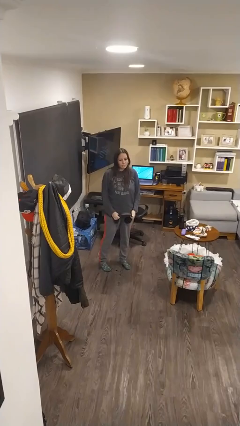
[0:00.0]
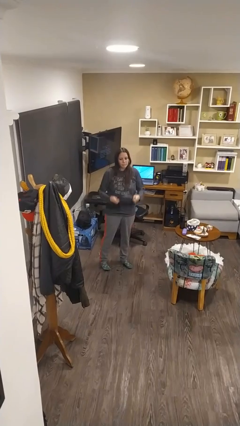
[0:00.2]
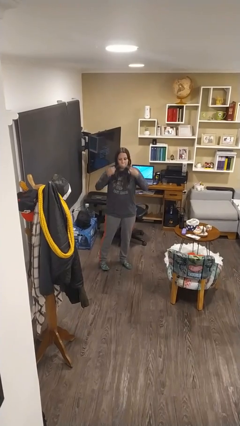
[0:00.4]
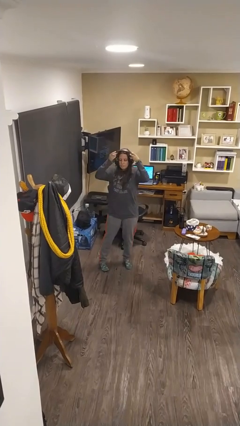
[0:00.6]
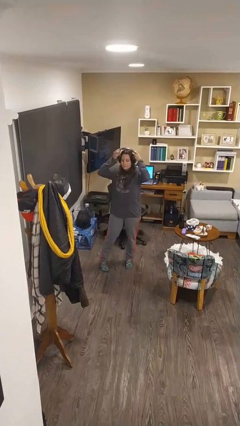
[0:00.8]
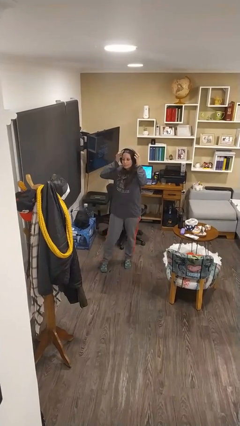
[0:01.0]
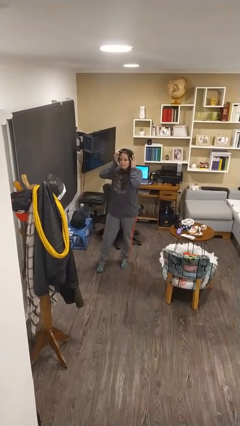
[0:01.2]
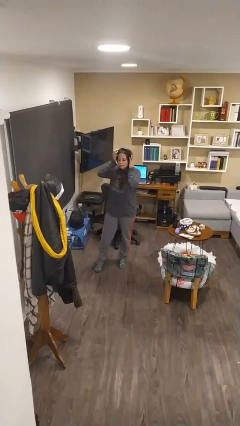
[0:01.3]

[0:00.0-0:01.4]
person puts on headphones

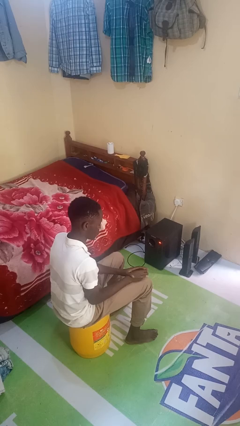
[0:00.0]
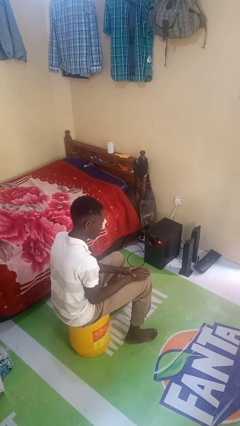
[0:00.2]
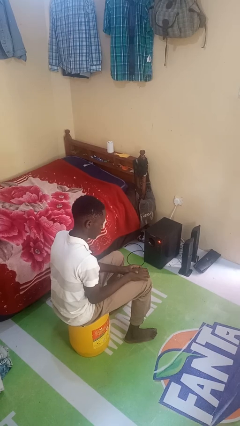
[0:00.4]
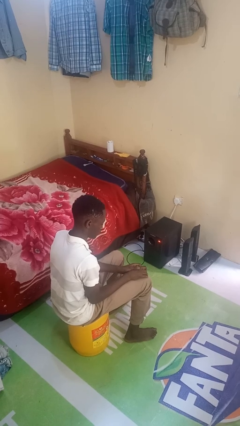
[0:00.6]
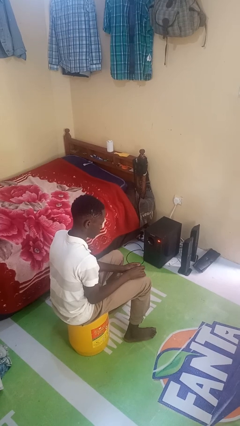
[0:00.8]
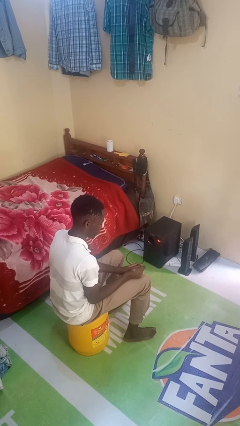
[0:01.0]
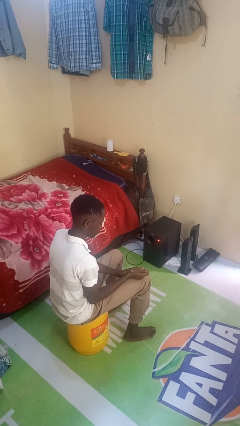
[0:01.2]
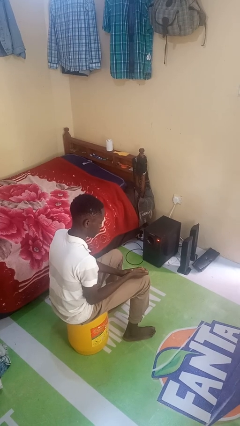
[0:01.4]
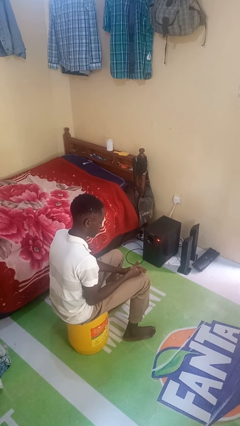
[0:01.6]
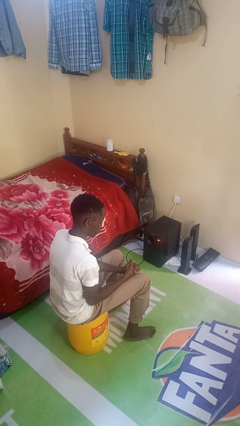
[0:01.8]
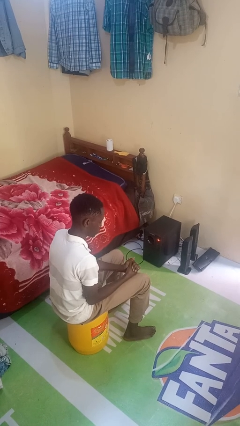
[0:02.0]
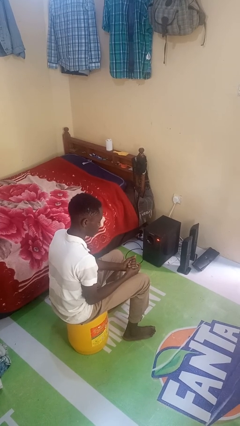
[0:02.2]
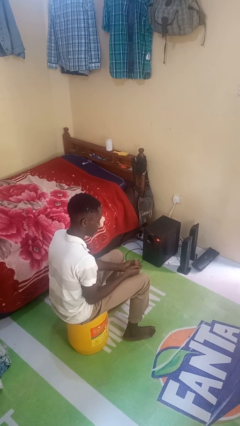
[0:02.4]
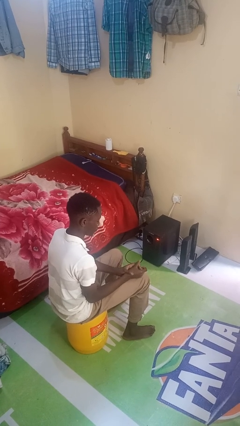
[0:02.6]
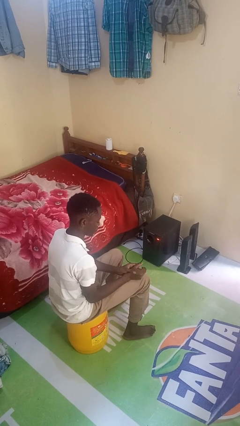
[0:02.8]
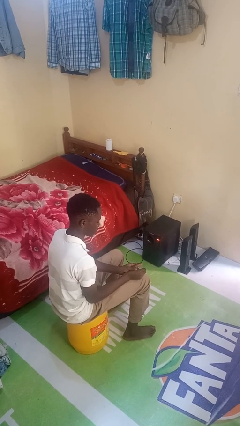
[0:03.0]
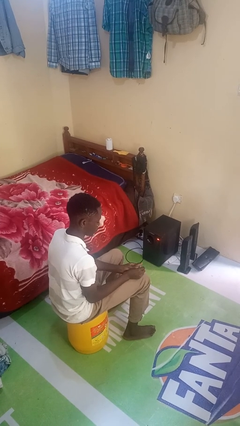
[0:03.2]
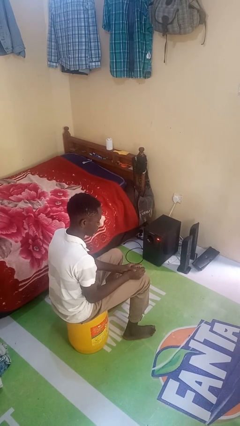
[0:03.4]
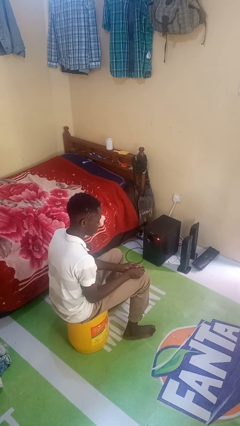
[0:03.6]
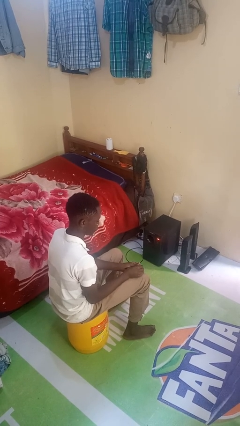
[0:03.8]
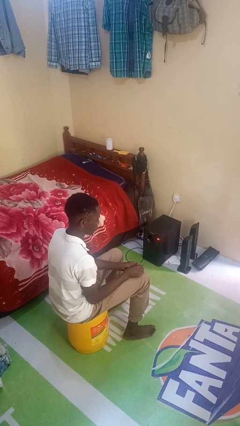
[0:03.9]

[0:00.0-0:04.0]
person looks at hands in lap

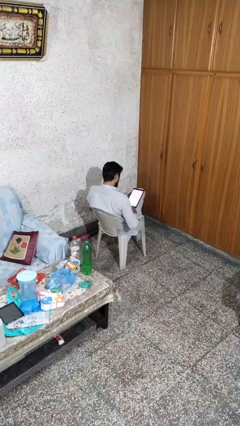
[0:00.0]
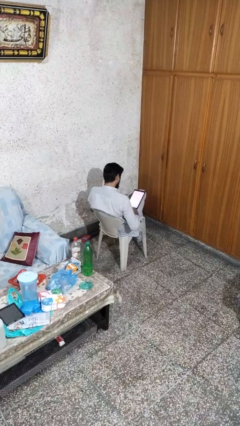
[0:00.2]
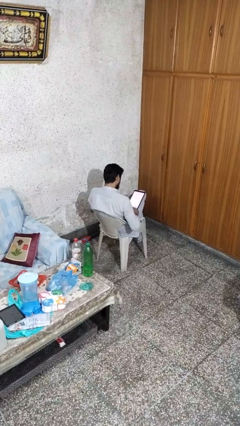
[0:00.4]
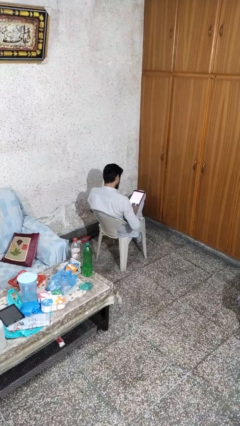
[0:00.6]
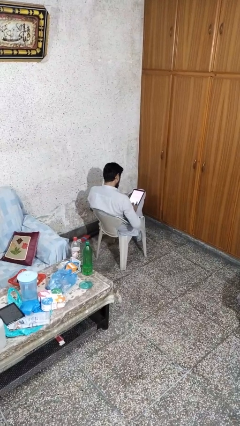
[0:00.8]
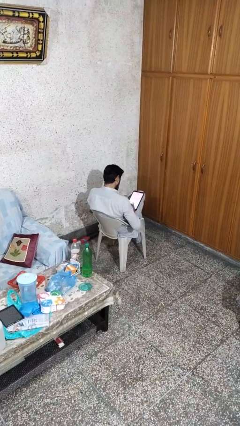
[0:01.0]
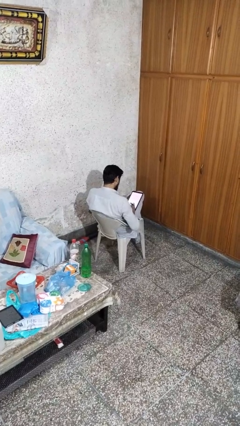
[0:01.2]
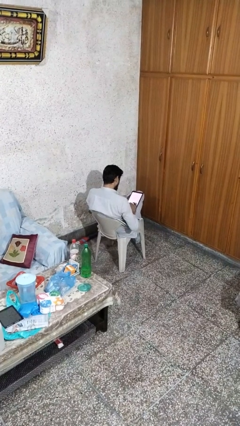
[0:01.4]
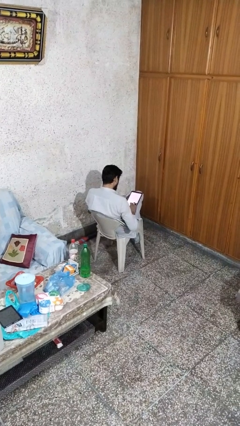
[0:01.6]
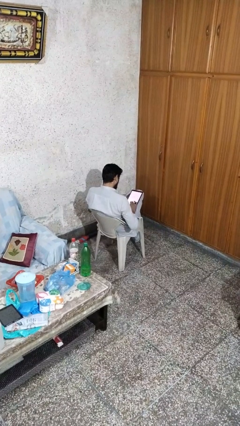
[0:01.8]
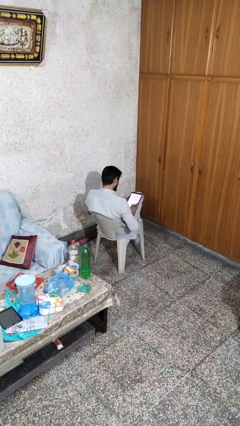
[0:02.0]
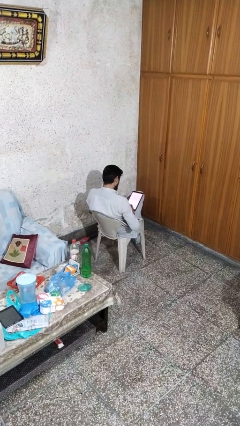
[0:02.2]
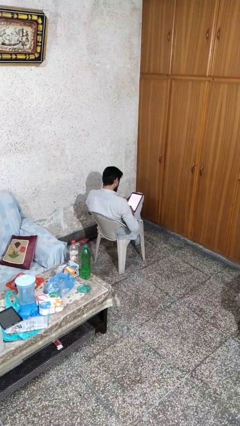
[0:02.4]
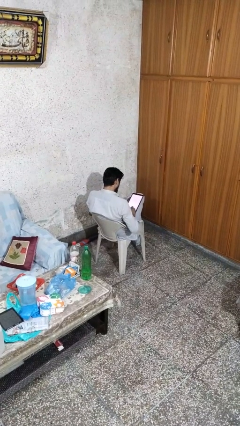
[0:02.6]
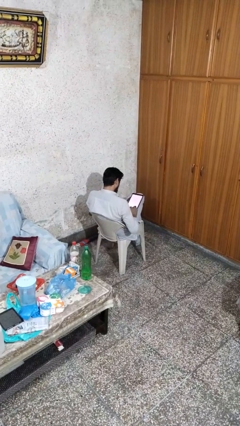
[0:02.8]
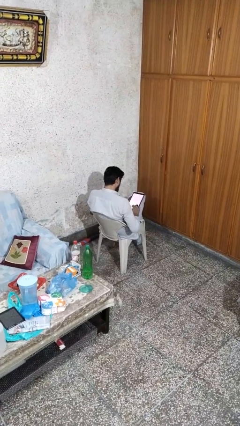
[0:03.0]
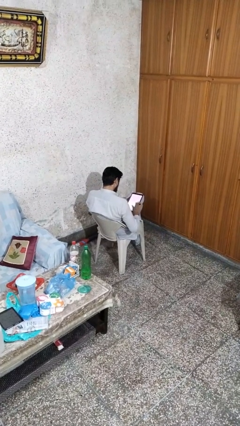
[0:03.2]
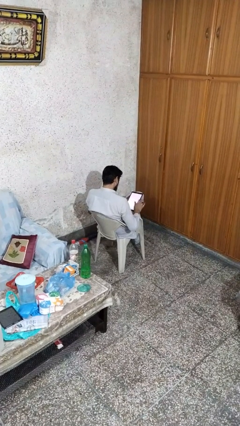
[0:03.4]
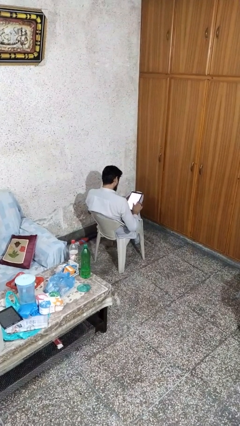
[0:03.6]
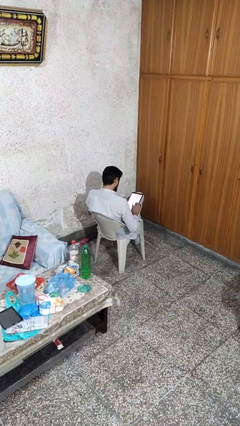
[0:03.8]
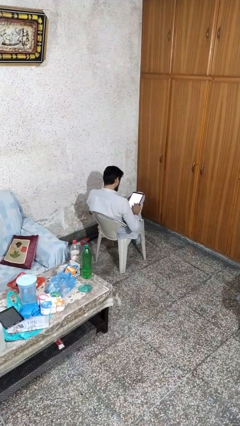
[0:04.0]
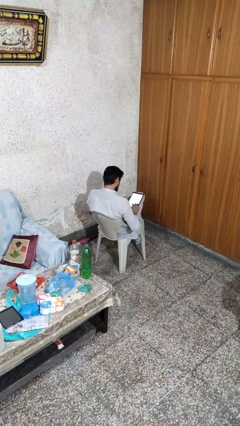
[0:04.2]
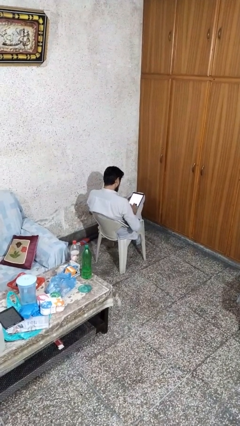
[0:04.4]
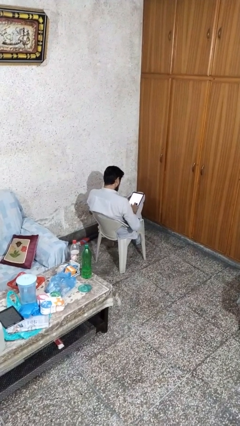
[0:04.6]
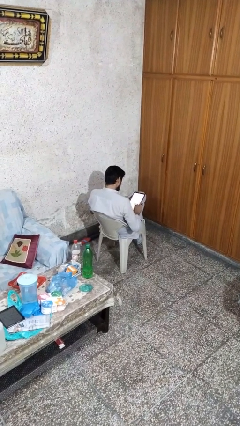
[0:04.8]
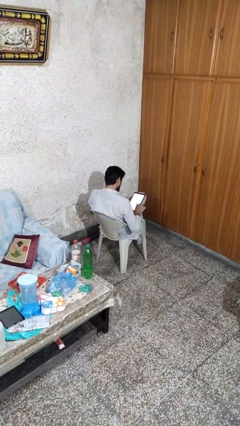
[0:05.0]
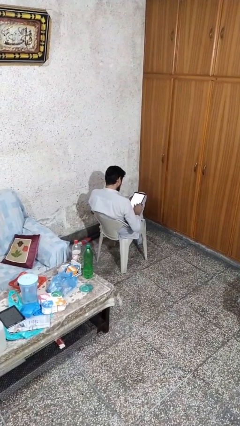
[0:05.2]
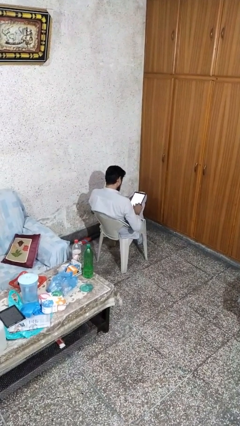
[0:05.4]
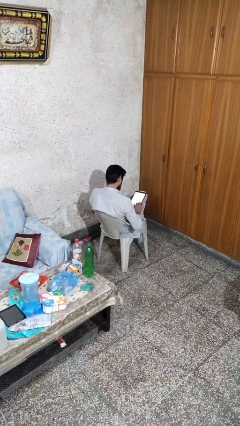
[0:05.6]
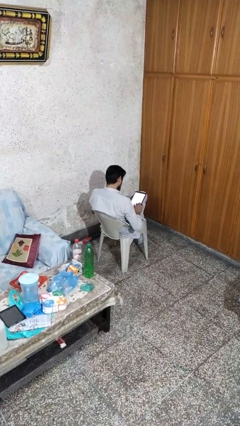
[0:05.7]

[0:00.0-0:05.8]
person interacts with tablet

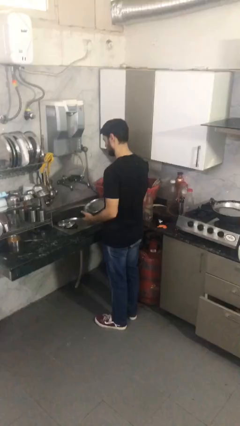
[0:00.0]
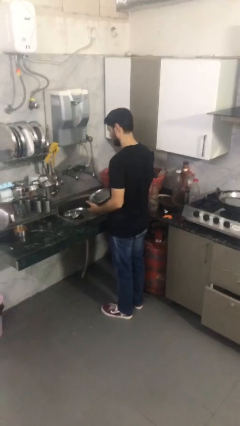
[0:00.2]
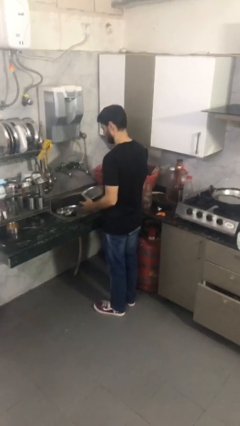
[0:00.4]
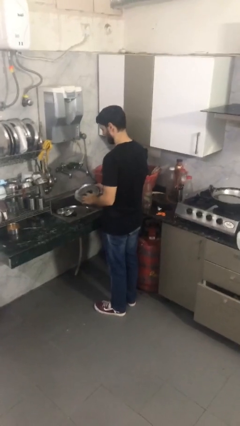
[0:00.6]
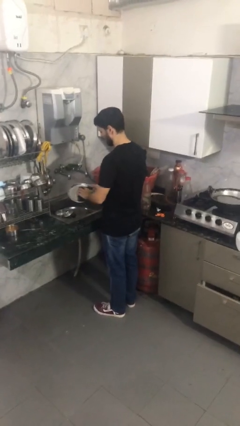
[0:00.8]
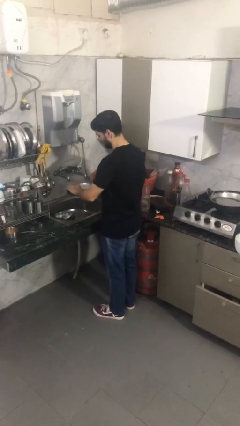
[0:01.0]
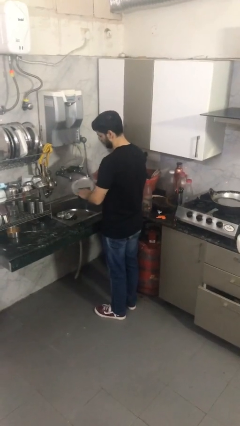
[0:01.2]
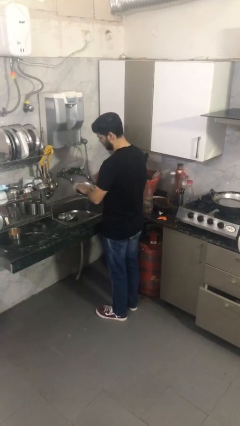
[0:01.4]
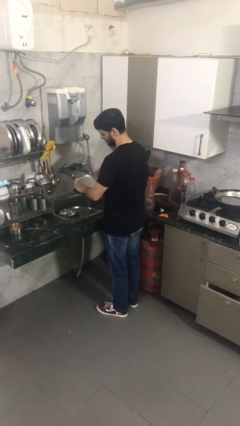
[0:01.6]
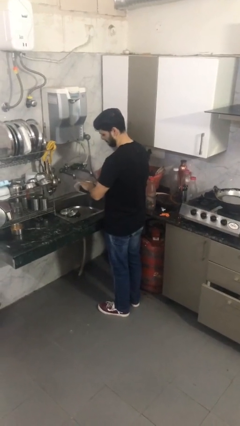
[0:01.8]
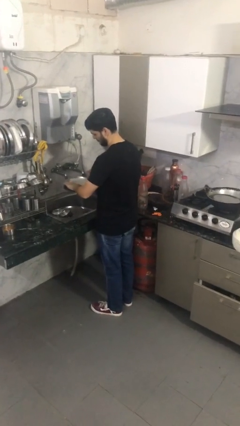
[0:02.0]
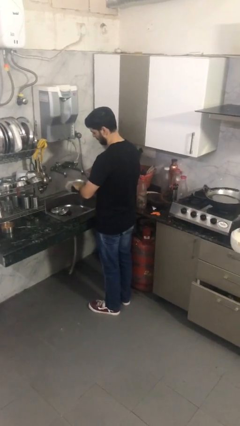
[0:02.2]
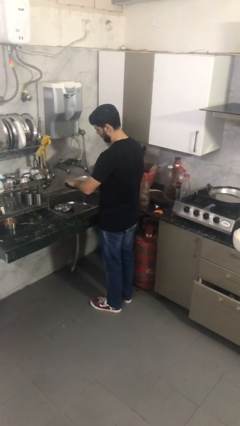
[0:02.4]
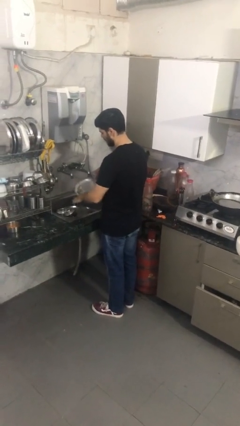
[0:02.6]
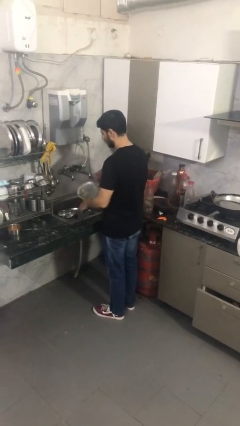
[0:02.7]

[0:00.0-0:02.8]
person washes dish

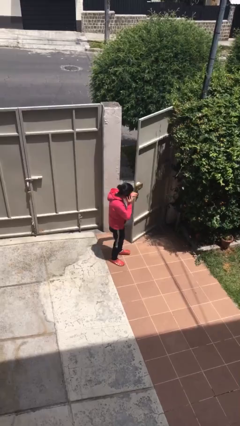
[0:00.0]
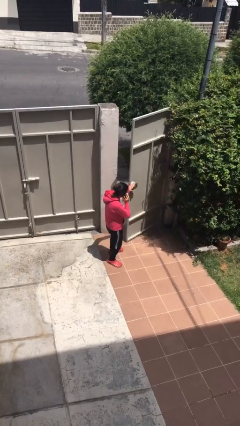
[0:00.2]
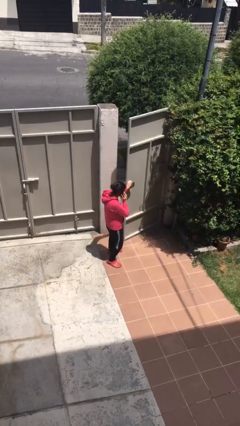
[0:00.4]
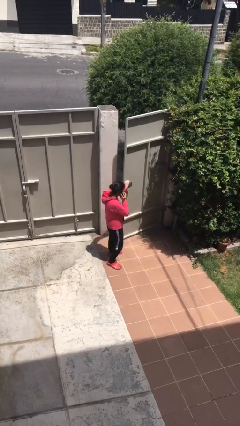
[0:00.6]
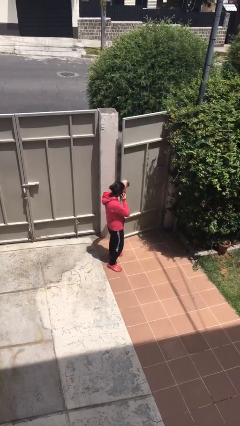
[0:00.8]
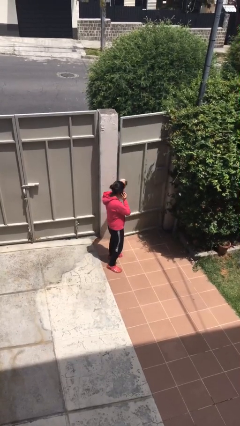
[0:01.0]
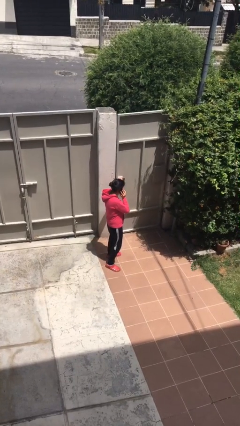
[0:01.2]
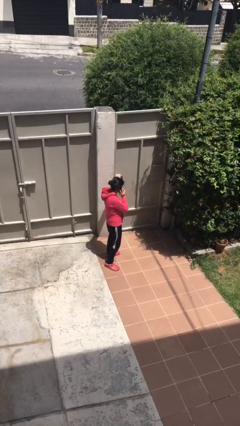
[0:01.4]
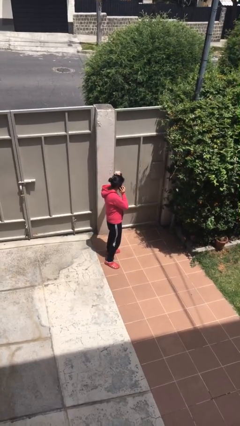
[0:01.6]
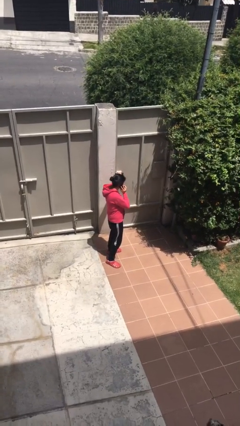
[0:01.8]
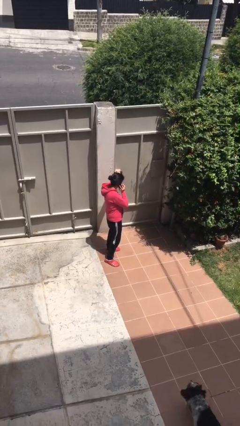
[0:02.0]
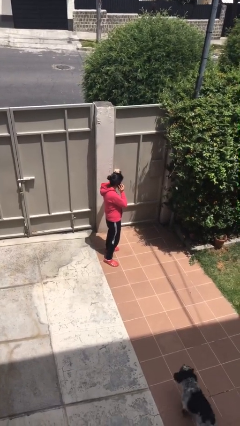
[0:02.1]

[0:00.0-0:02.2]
person closes facility door

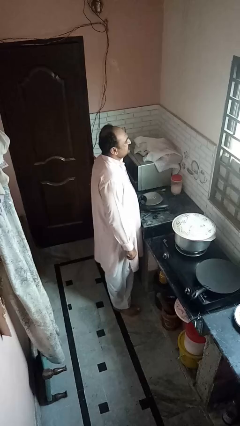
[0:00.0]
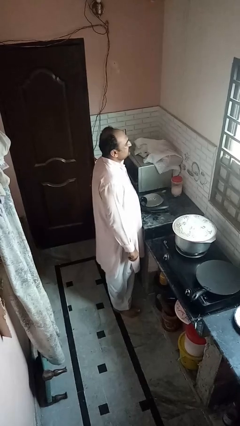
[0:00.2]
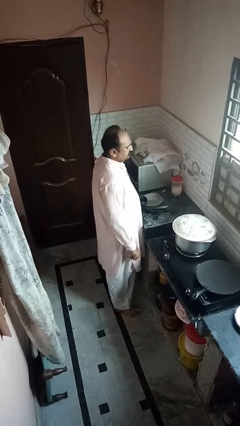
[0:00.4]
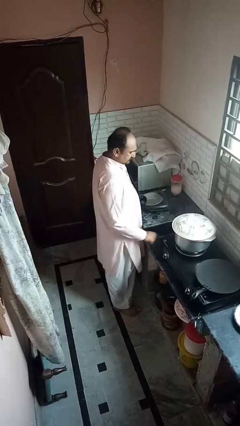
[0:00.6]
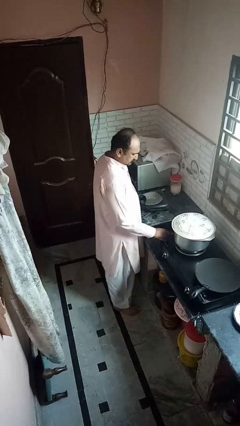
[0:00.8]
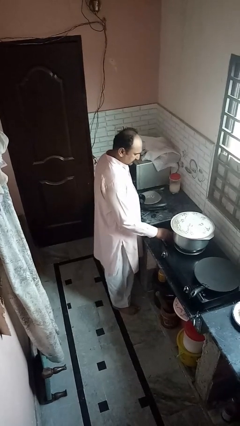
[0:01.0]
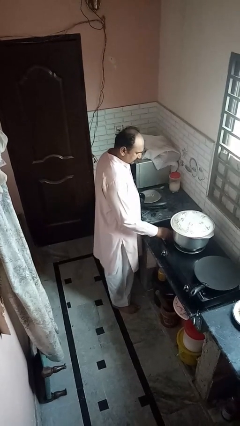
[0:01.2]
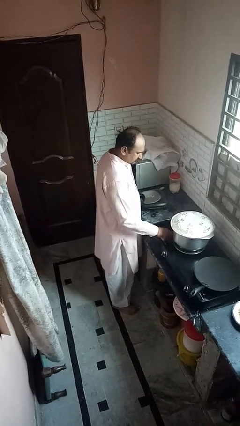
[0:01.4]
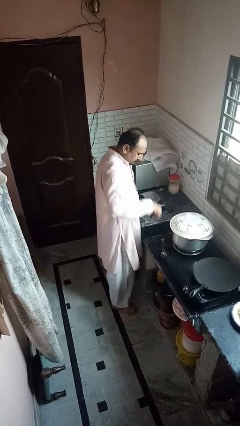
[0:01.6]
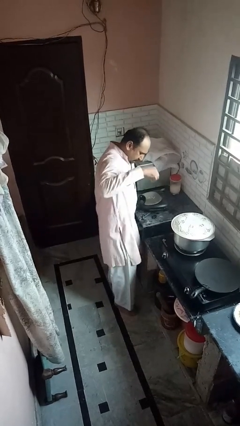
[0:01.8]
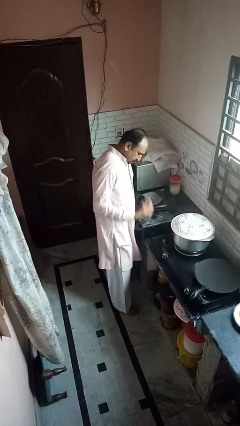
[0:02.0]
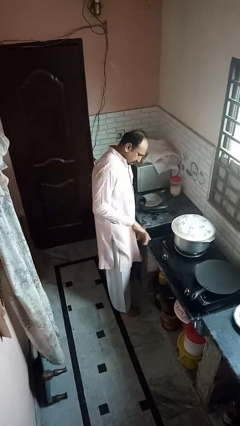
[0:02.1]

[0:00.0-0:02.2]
person burns hand
